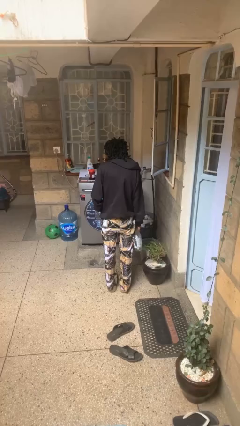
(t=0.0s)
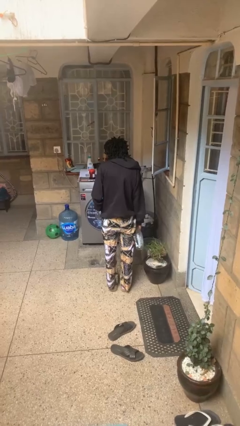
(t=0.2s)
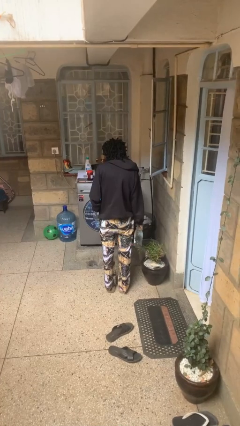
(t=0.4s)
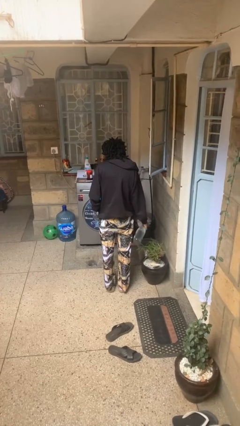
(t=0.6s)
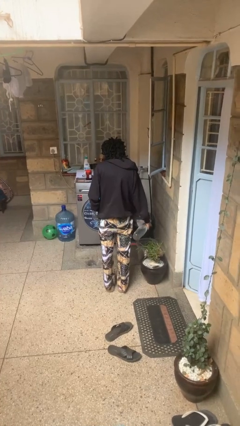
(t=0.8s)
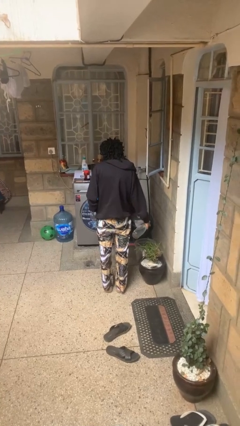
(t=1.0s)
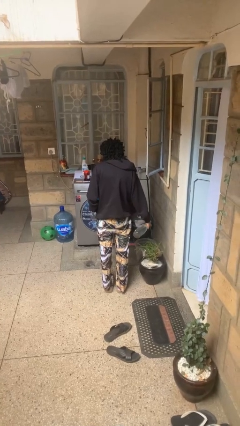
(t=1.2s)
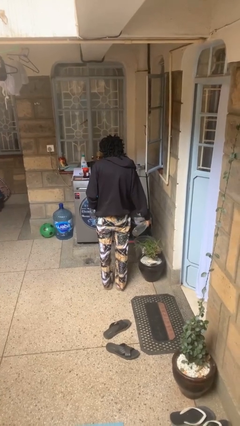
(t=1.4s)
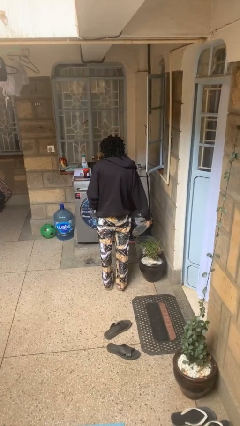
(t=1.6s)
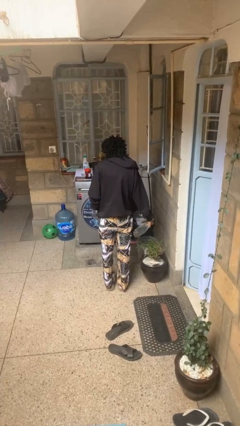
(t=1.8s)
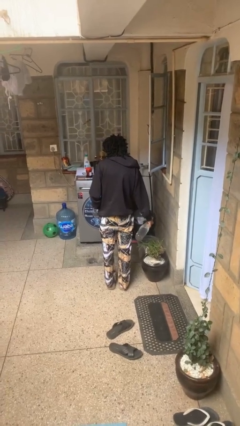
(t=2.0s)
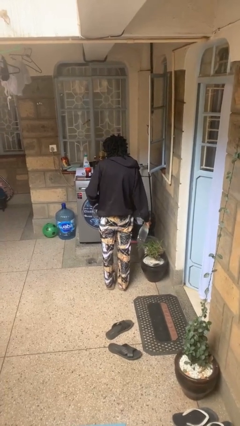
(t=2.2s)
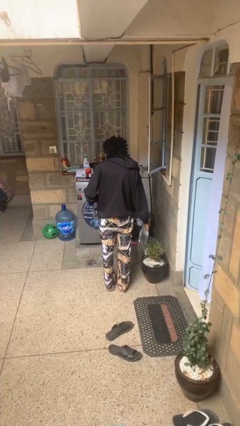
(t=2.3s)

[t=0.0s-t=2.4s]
person waters houseplant

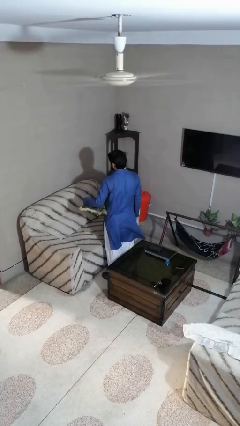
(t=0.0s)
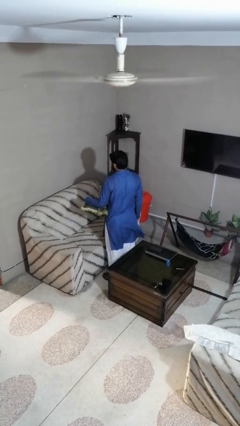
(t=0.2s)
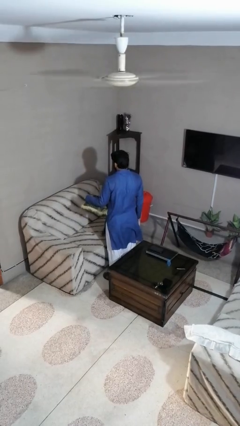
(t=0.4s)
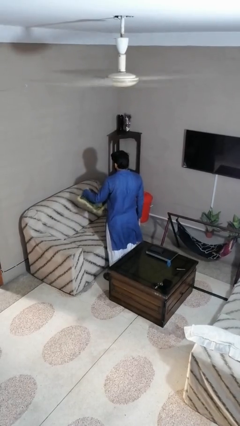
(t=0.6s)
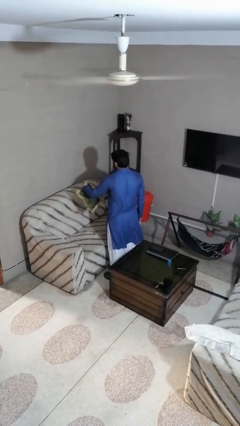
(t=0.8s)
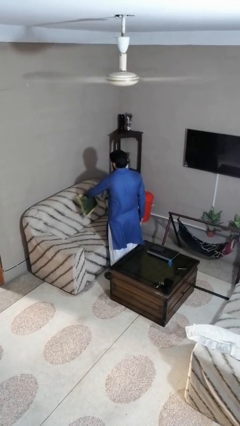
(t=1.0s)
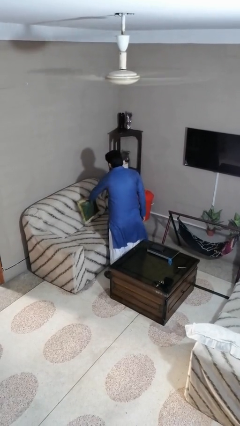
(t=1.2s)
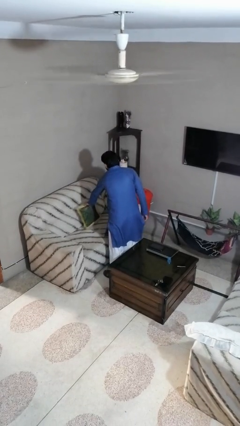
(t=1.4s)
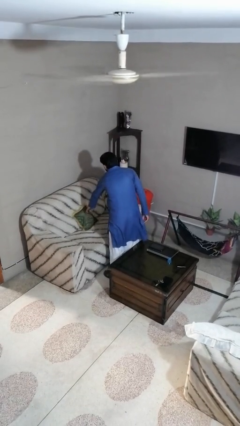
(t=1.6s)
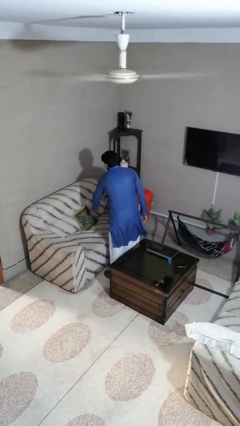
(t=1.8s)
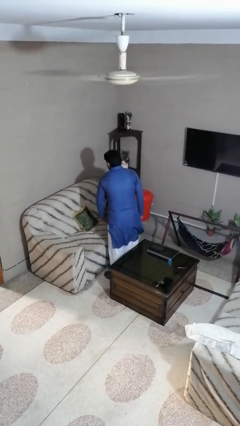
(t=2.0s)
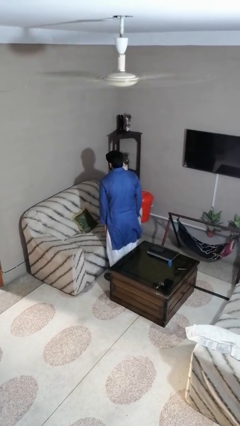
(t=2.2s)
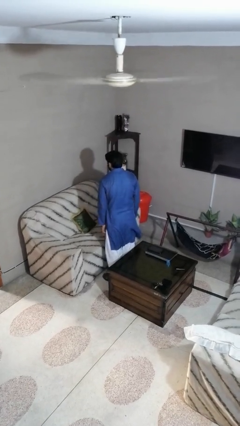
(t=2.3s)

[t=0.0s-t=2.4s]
person puts down object on couch

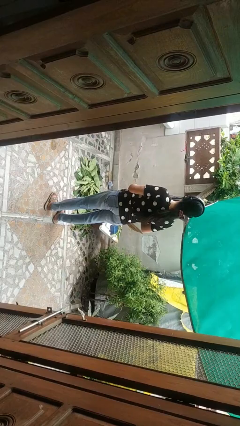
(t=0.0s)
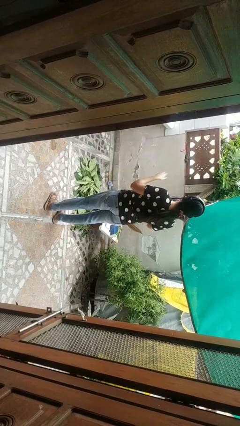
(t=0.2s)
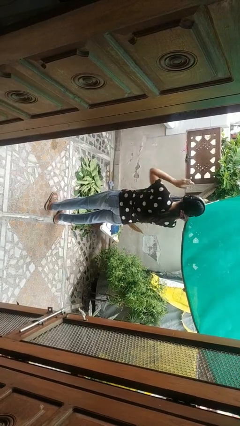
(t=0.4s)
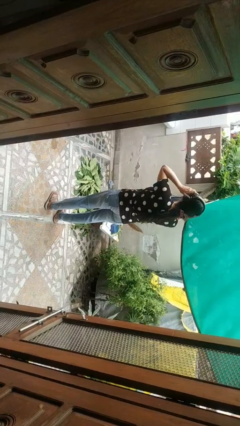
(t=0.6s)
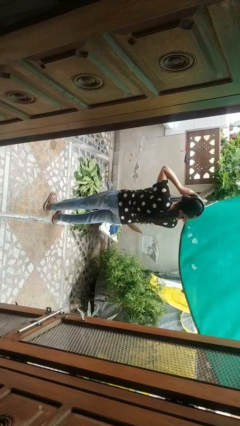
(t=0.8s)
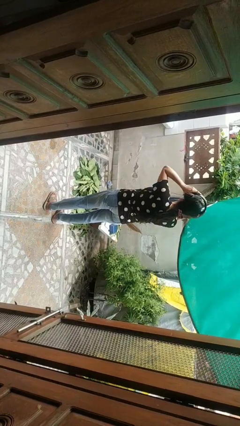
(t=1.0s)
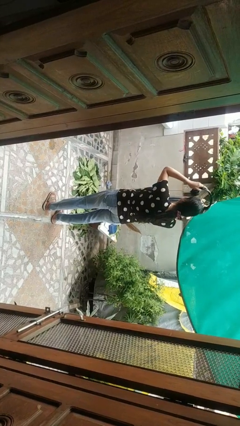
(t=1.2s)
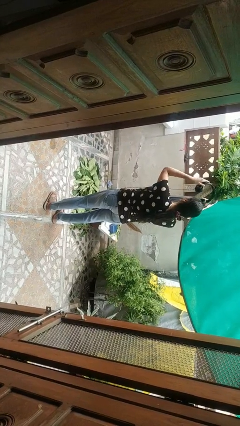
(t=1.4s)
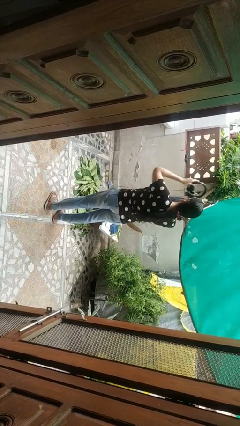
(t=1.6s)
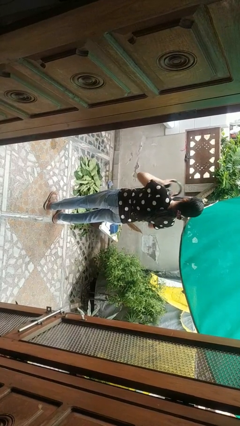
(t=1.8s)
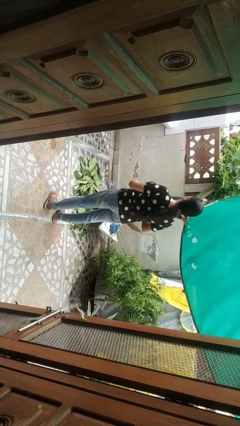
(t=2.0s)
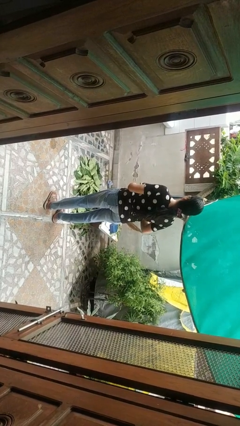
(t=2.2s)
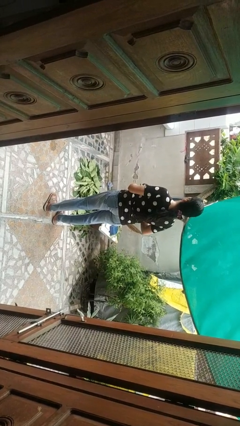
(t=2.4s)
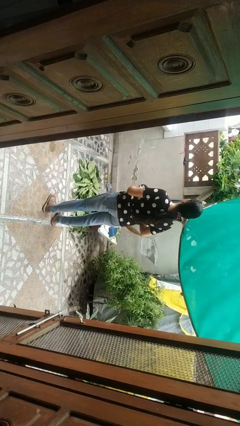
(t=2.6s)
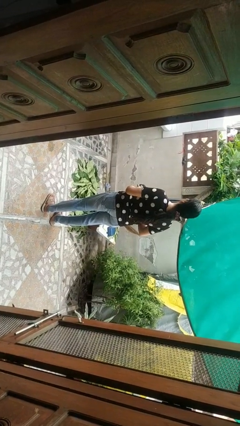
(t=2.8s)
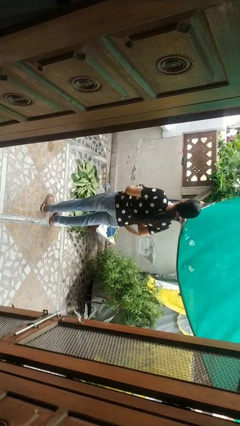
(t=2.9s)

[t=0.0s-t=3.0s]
person takes off headphones

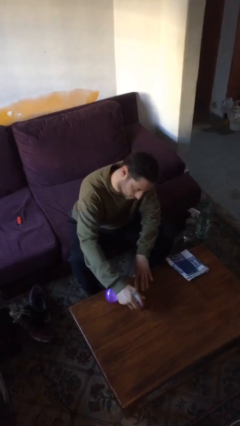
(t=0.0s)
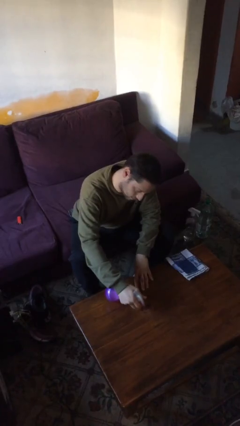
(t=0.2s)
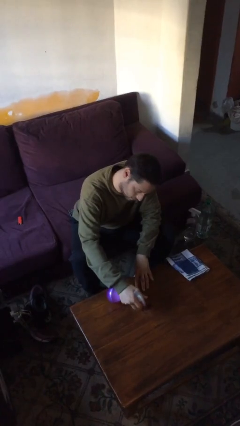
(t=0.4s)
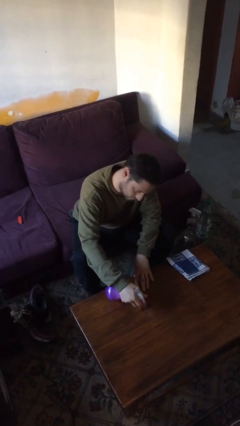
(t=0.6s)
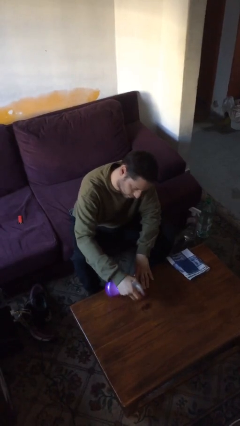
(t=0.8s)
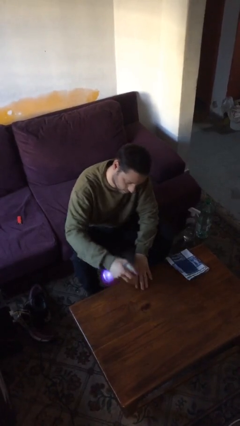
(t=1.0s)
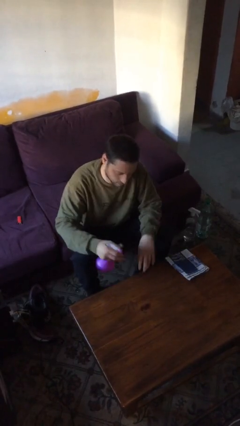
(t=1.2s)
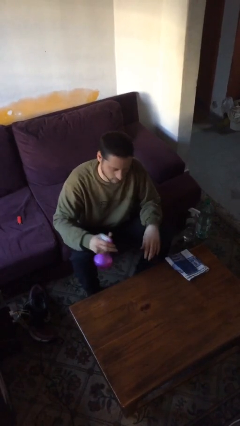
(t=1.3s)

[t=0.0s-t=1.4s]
person sprays from bottle

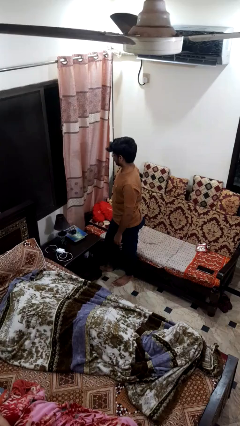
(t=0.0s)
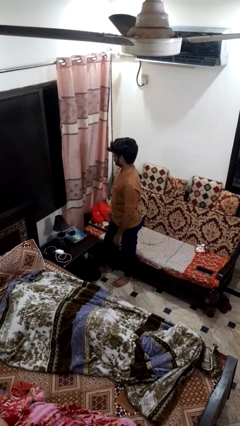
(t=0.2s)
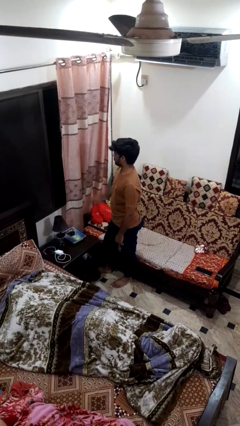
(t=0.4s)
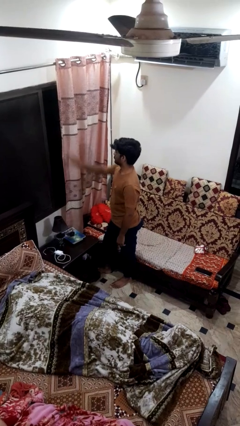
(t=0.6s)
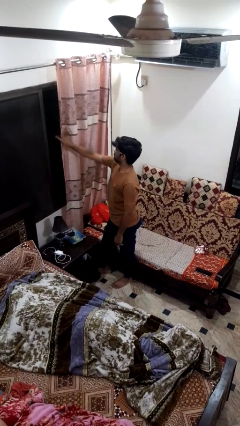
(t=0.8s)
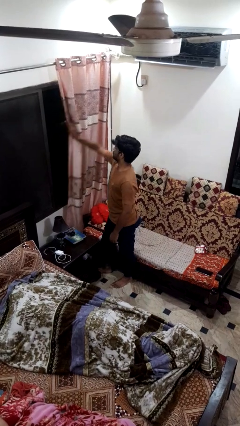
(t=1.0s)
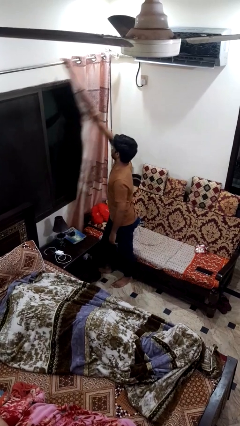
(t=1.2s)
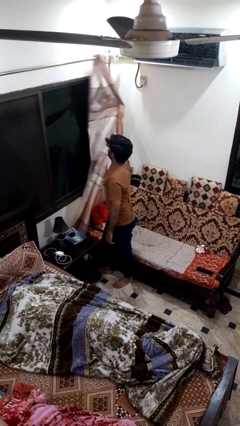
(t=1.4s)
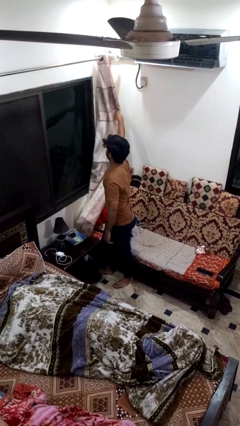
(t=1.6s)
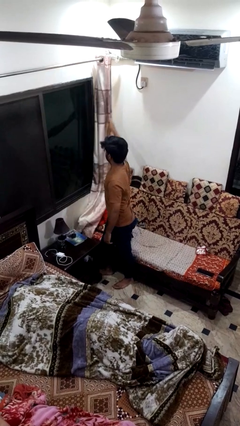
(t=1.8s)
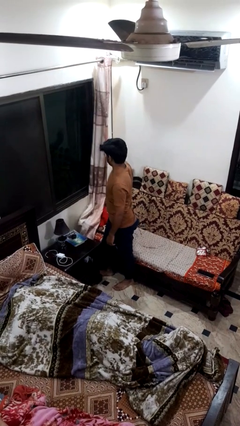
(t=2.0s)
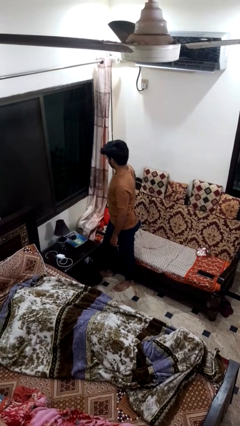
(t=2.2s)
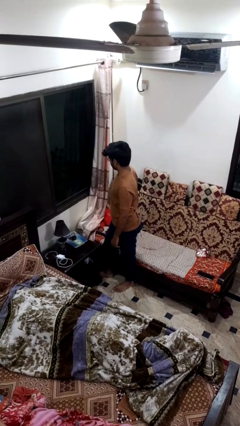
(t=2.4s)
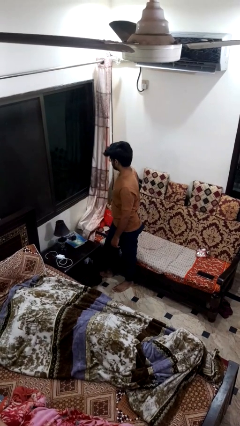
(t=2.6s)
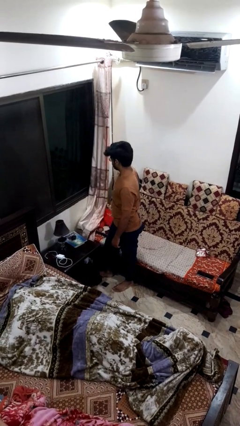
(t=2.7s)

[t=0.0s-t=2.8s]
person opens curtains

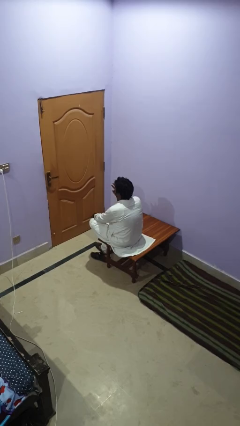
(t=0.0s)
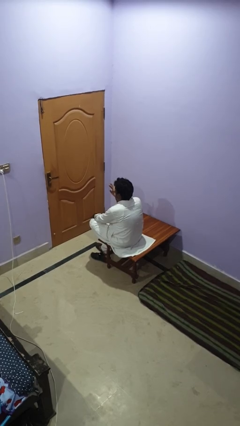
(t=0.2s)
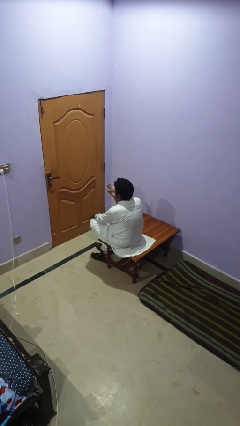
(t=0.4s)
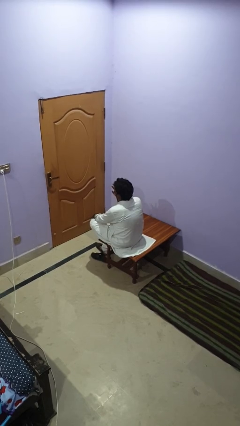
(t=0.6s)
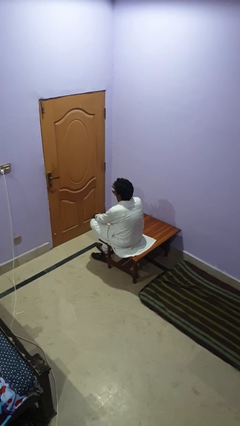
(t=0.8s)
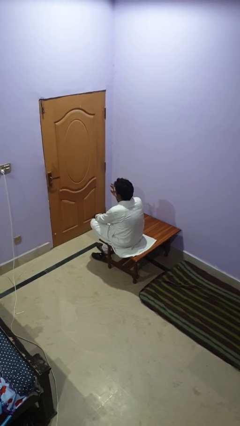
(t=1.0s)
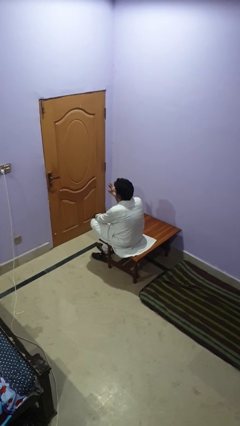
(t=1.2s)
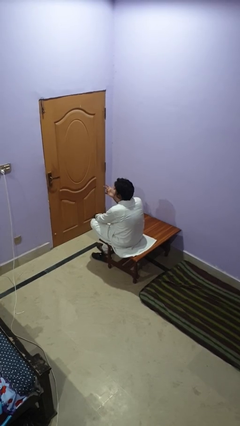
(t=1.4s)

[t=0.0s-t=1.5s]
person licks fingers

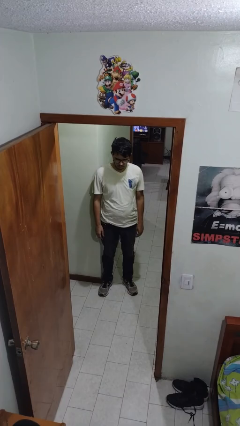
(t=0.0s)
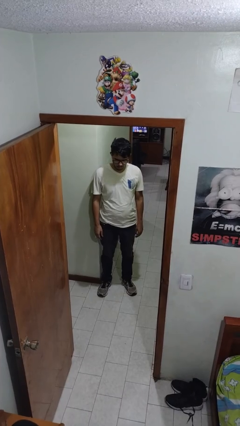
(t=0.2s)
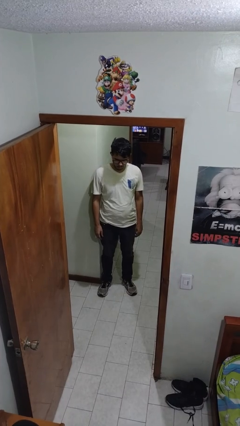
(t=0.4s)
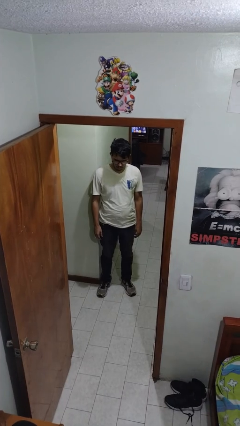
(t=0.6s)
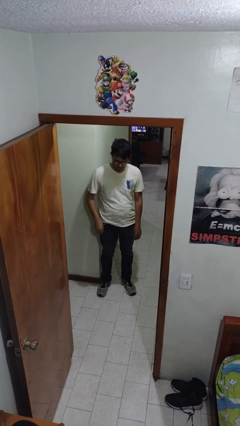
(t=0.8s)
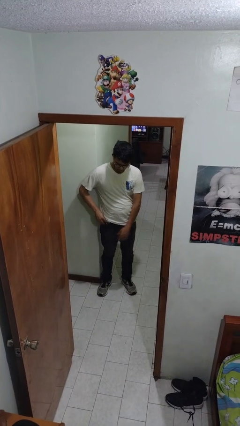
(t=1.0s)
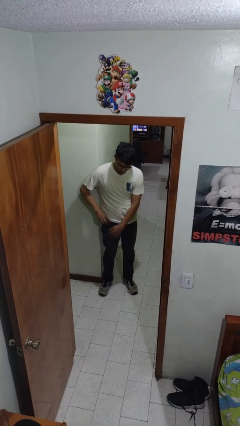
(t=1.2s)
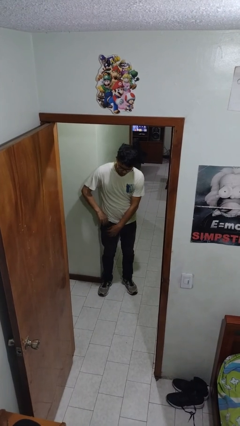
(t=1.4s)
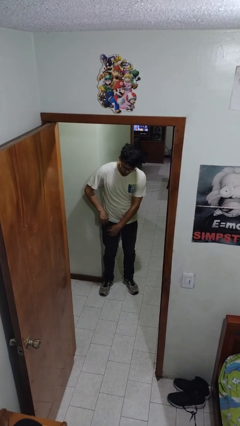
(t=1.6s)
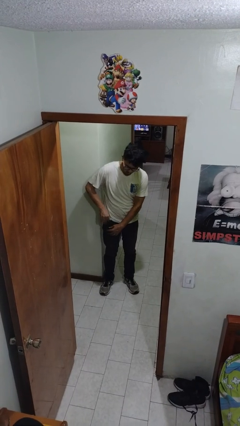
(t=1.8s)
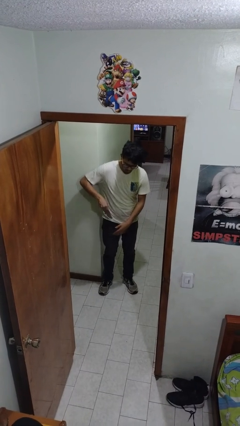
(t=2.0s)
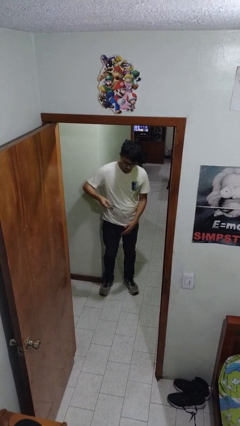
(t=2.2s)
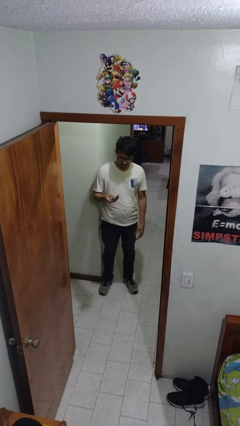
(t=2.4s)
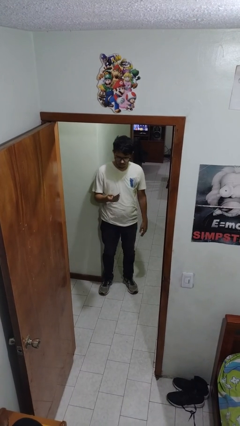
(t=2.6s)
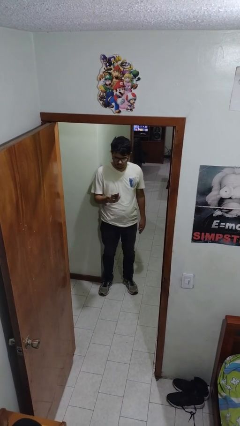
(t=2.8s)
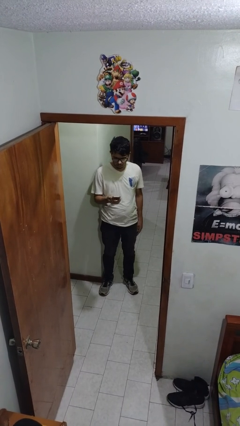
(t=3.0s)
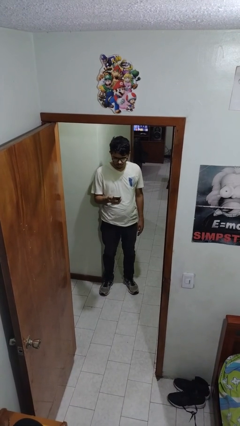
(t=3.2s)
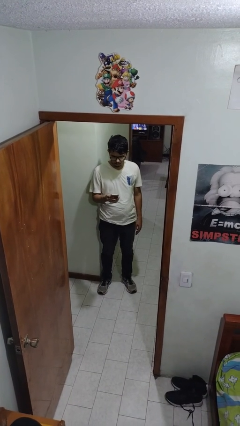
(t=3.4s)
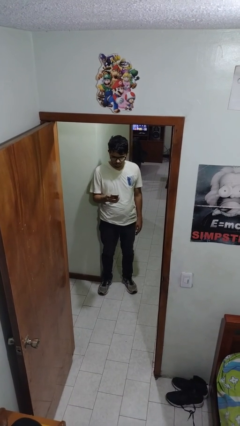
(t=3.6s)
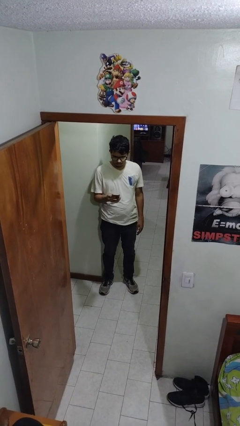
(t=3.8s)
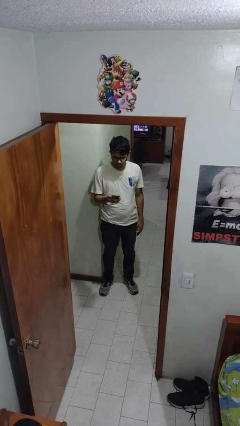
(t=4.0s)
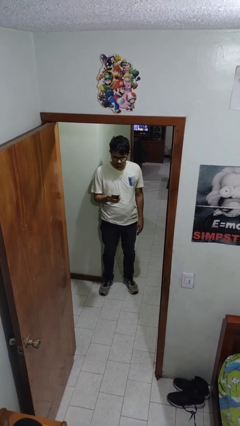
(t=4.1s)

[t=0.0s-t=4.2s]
person takes phone from pocket
